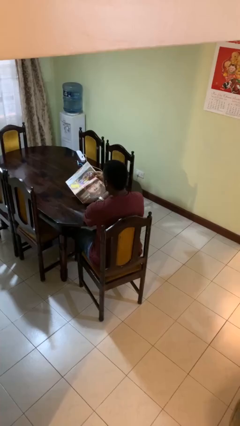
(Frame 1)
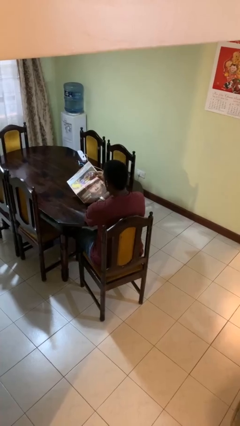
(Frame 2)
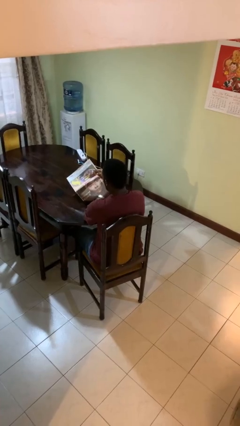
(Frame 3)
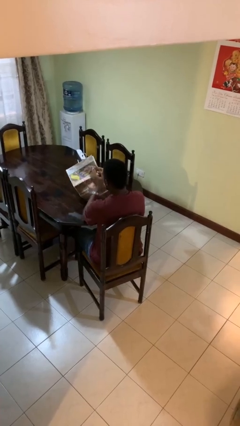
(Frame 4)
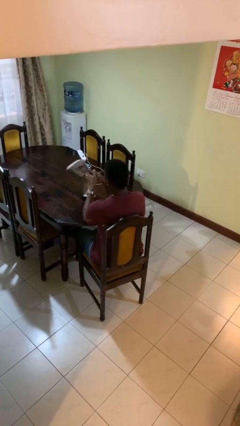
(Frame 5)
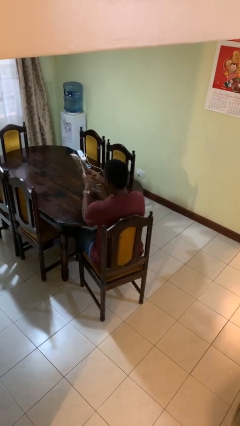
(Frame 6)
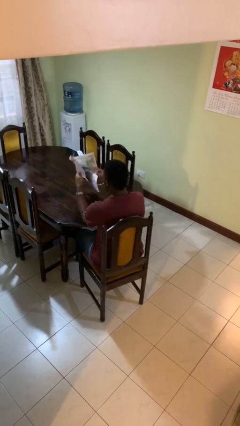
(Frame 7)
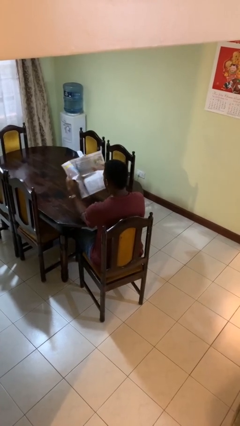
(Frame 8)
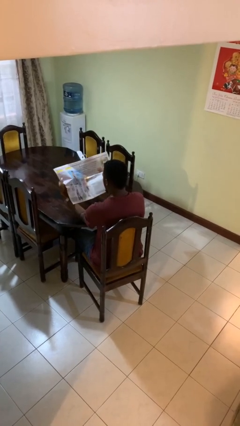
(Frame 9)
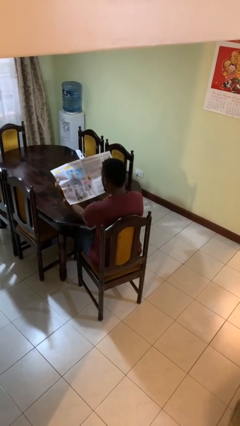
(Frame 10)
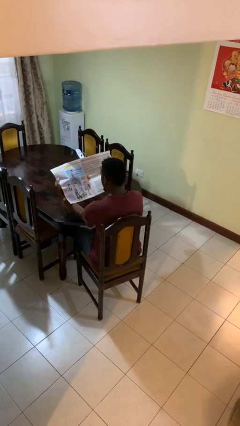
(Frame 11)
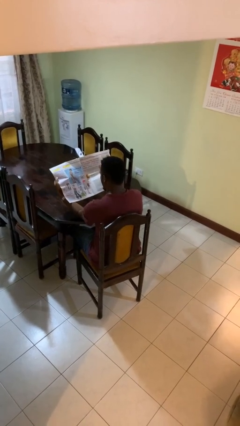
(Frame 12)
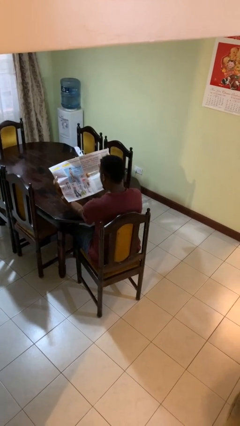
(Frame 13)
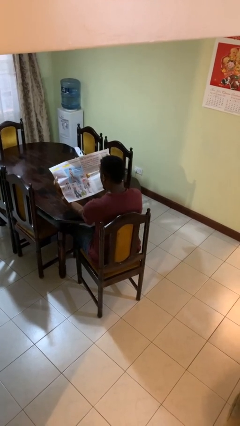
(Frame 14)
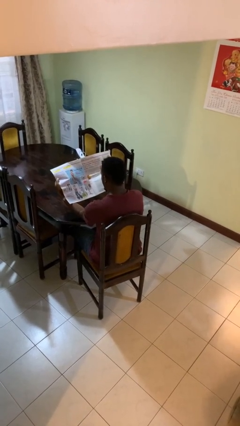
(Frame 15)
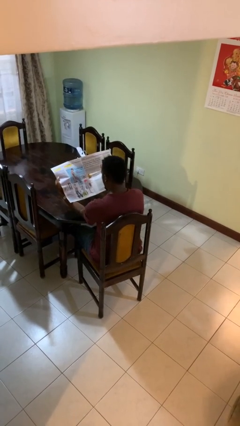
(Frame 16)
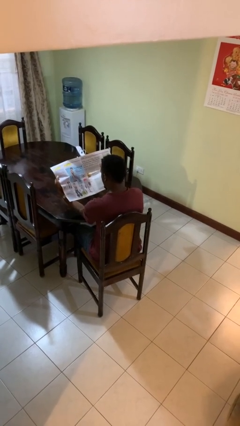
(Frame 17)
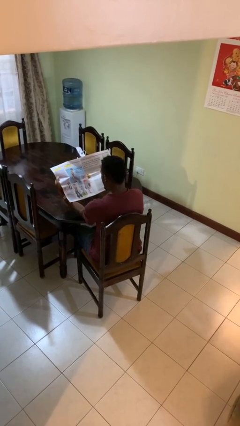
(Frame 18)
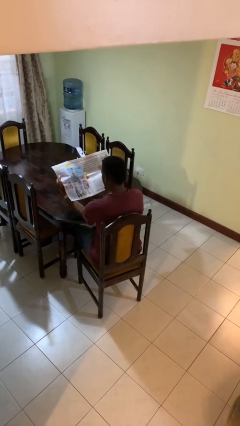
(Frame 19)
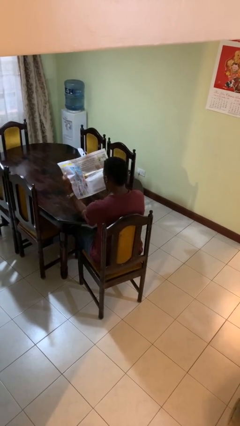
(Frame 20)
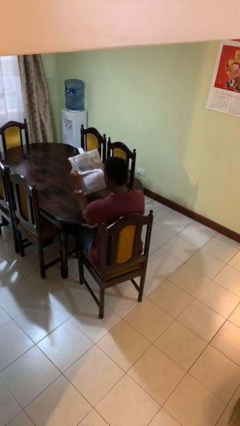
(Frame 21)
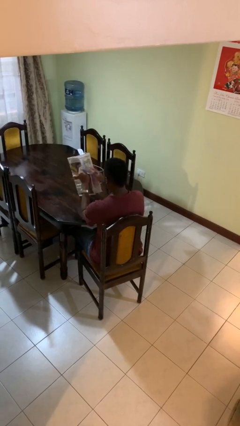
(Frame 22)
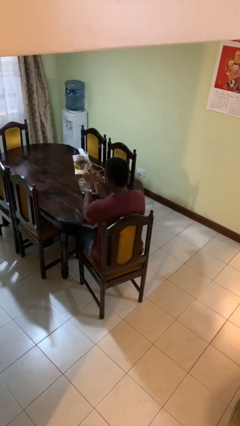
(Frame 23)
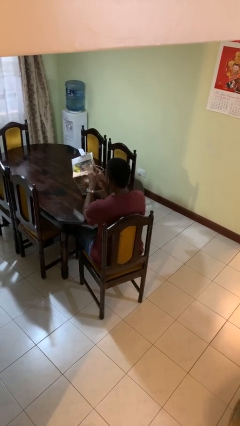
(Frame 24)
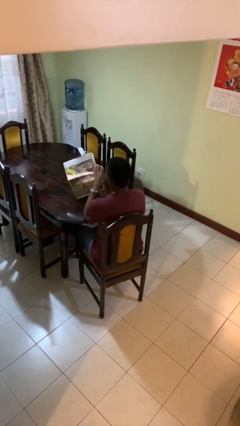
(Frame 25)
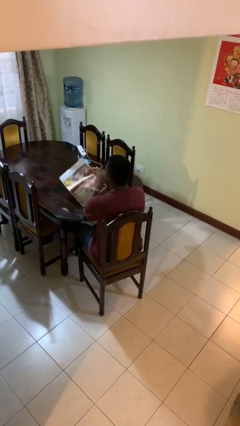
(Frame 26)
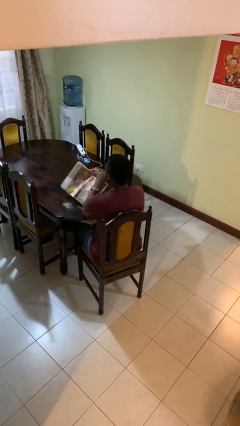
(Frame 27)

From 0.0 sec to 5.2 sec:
person reads newspaper

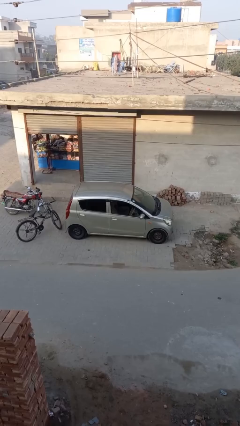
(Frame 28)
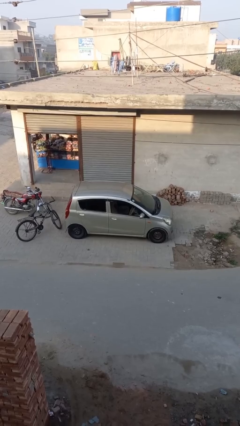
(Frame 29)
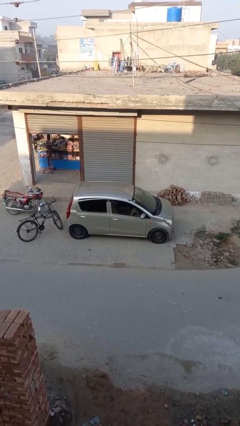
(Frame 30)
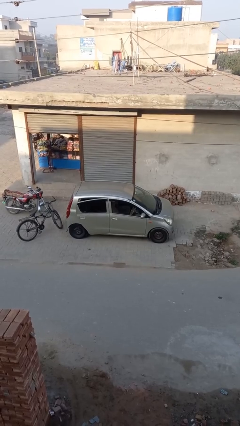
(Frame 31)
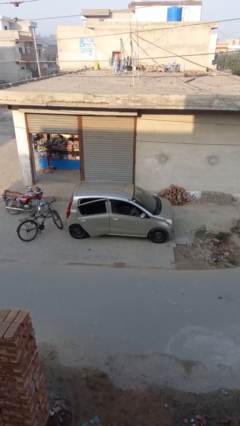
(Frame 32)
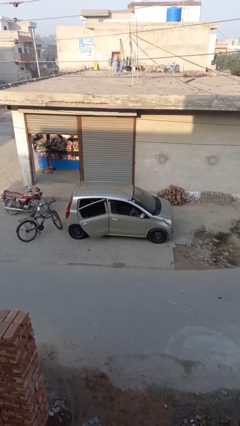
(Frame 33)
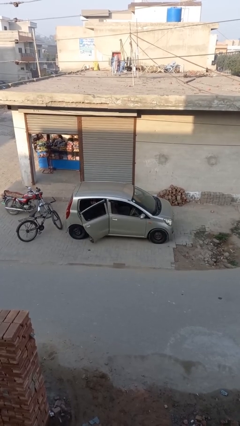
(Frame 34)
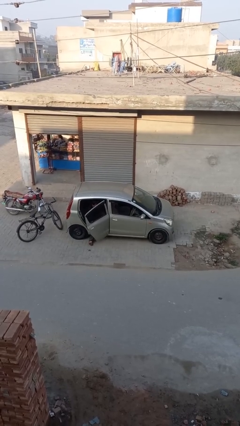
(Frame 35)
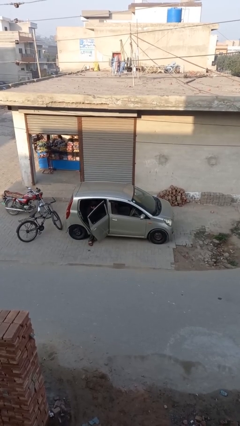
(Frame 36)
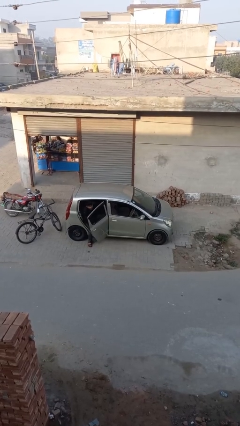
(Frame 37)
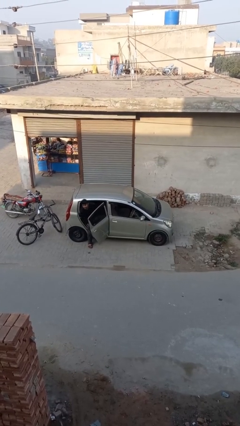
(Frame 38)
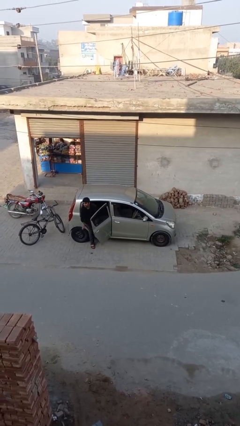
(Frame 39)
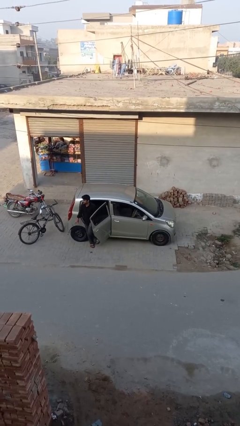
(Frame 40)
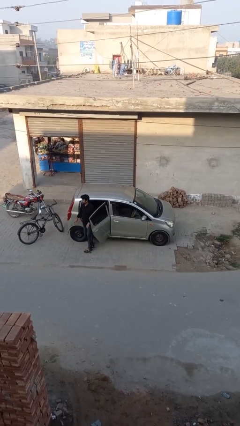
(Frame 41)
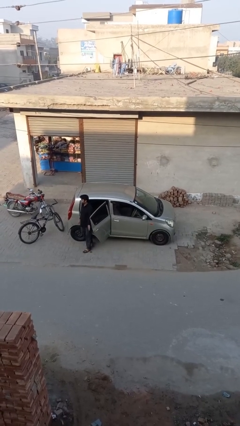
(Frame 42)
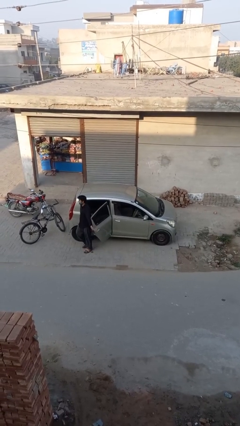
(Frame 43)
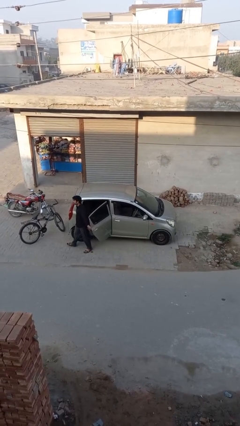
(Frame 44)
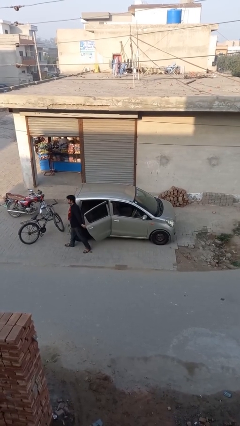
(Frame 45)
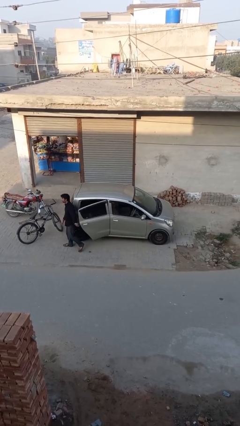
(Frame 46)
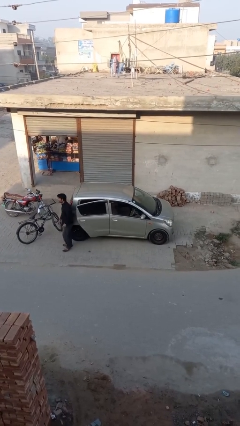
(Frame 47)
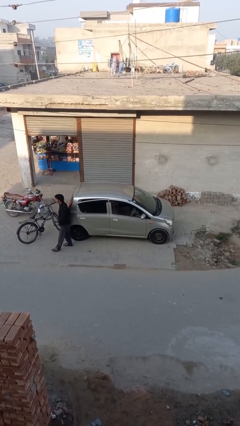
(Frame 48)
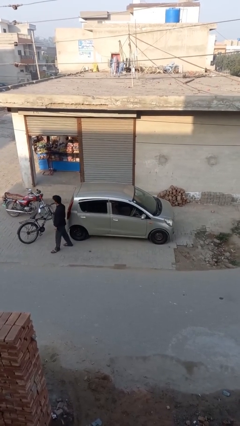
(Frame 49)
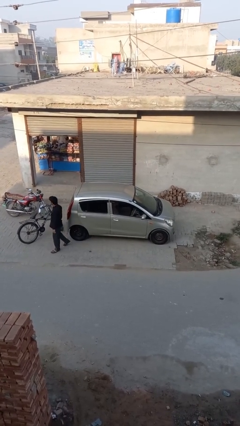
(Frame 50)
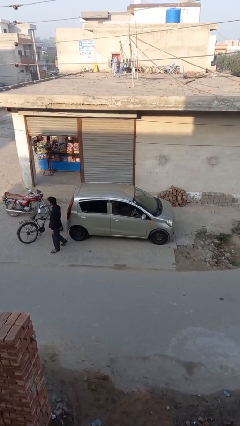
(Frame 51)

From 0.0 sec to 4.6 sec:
car drops off person

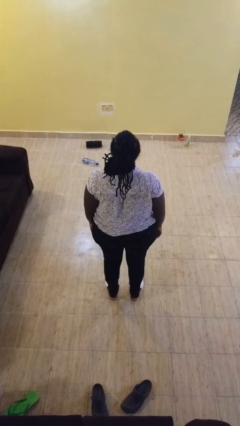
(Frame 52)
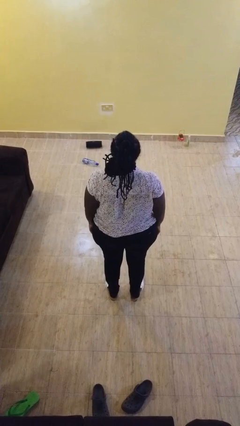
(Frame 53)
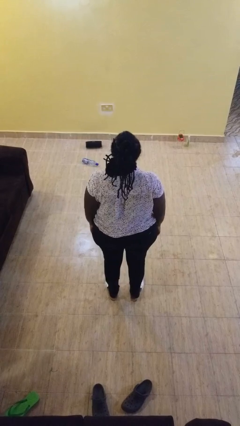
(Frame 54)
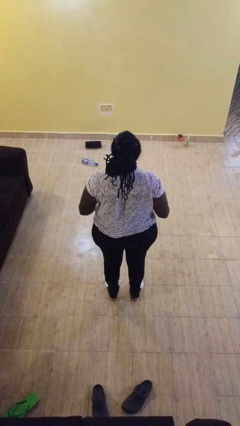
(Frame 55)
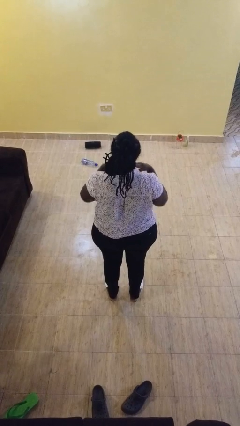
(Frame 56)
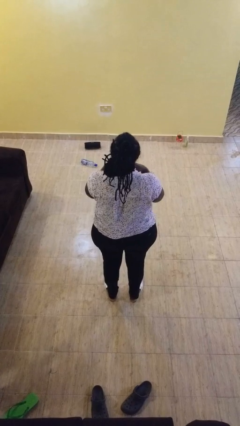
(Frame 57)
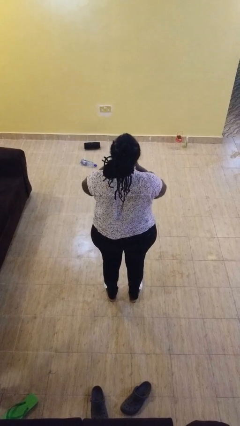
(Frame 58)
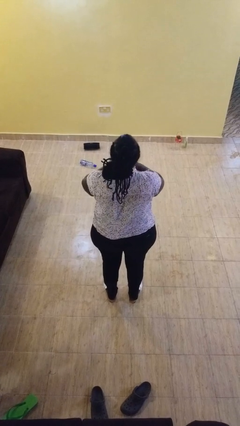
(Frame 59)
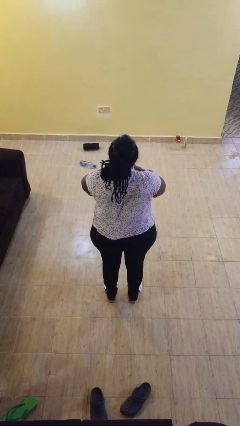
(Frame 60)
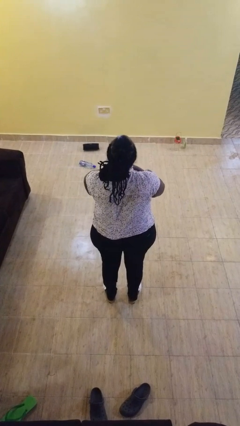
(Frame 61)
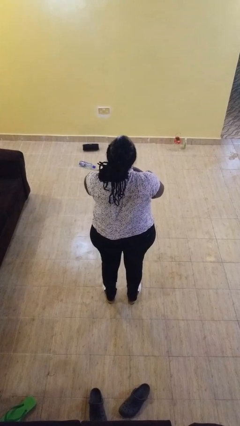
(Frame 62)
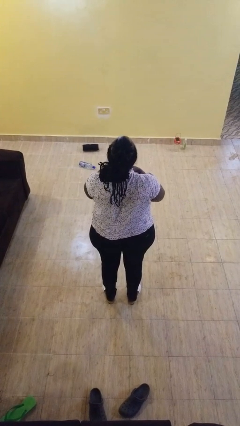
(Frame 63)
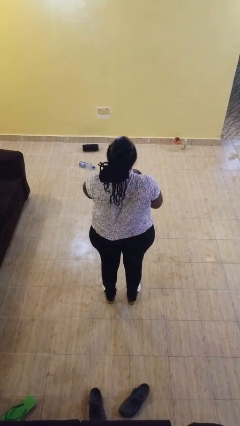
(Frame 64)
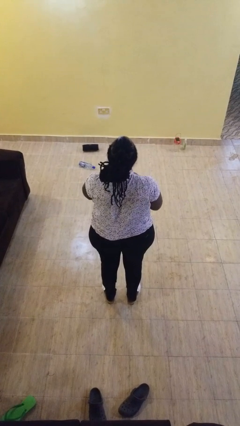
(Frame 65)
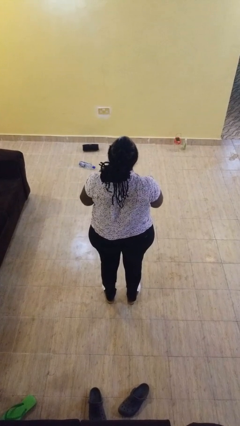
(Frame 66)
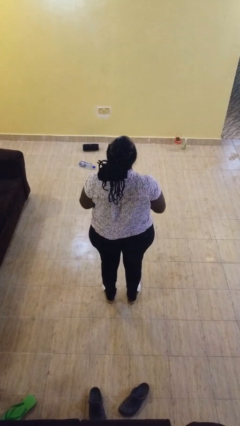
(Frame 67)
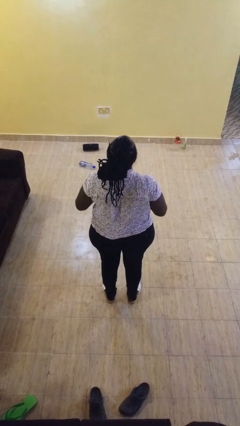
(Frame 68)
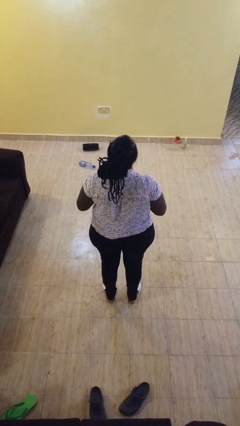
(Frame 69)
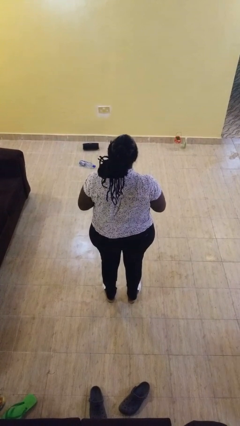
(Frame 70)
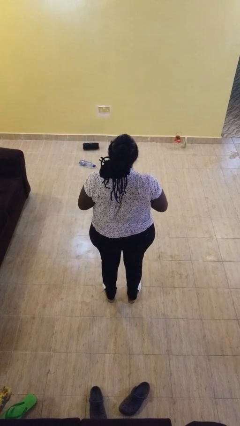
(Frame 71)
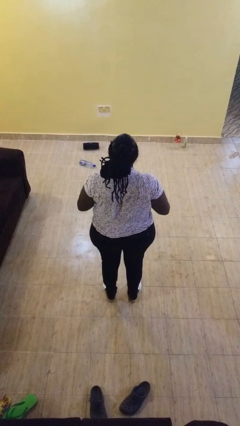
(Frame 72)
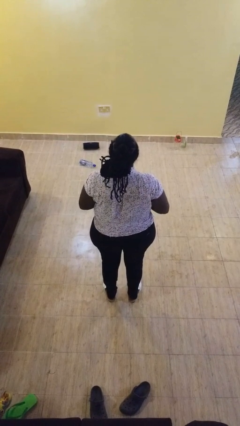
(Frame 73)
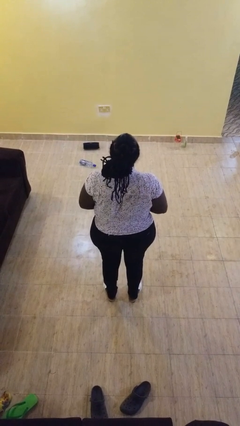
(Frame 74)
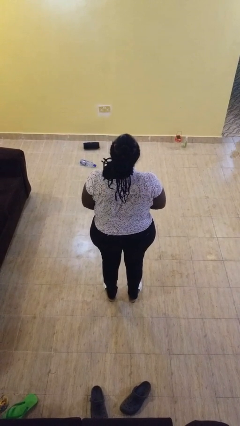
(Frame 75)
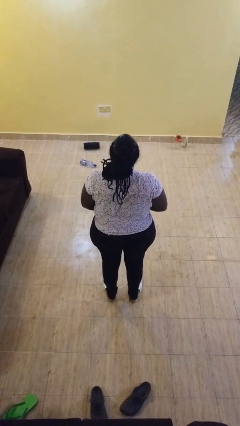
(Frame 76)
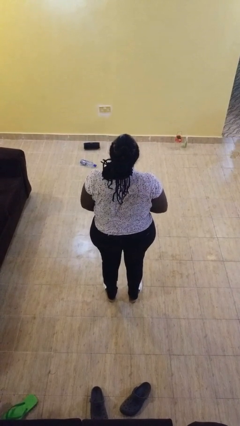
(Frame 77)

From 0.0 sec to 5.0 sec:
person buttons shirt

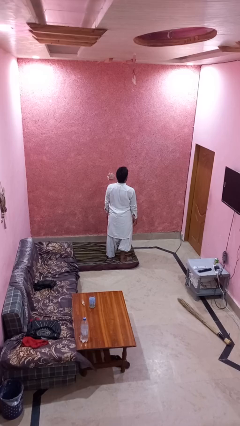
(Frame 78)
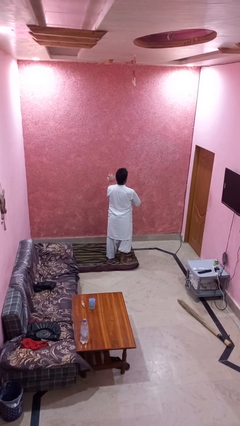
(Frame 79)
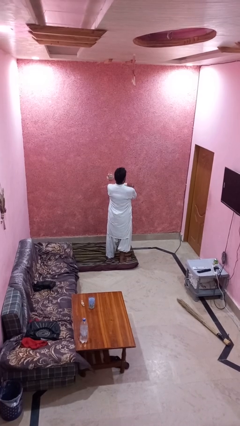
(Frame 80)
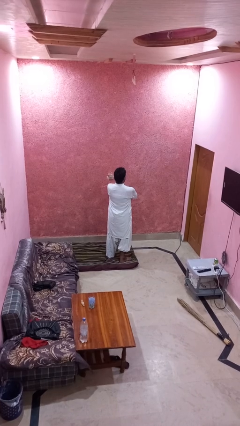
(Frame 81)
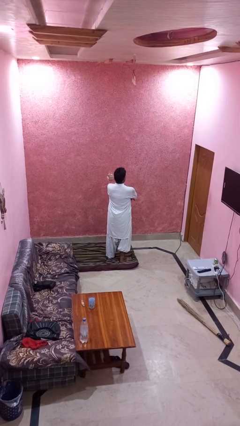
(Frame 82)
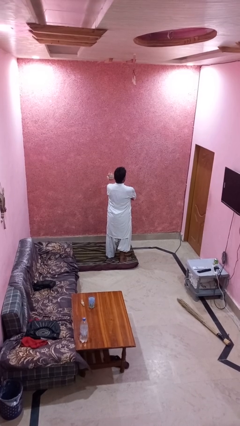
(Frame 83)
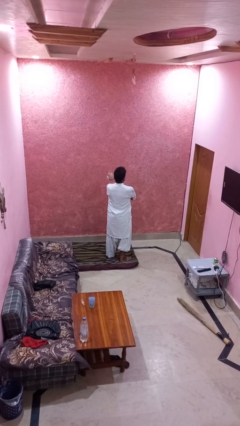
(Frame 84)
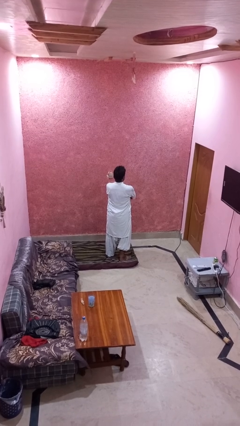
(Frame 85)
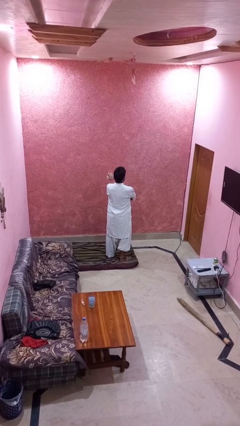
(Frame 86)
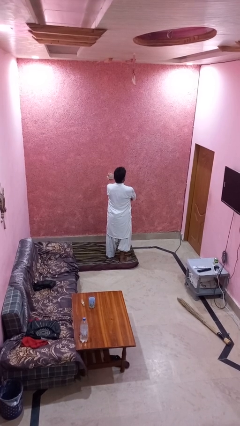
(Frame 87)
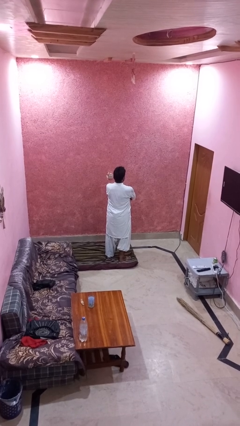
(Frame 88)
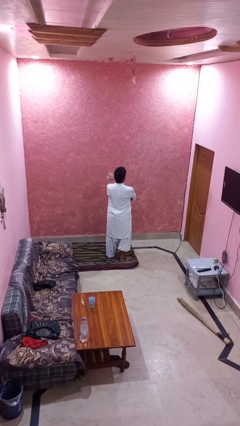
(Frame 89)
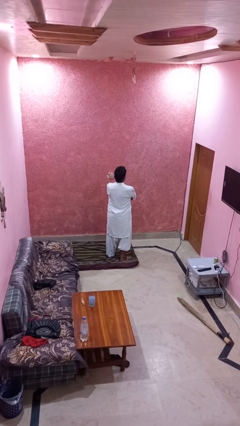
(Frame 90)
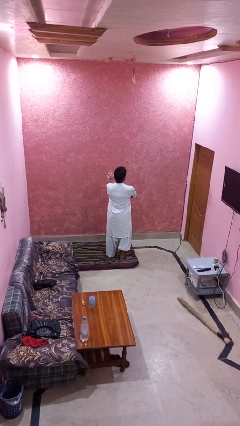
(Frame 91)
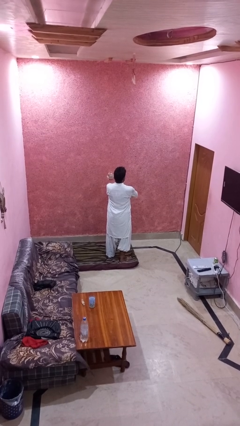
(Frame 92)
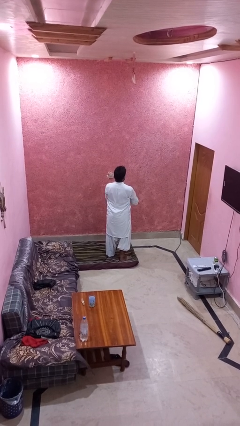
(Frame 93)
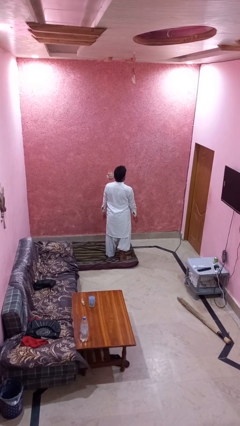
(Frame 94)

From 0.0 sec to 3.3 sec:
person crosses arms
